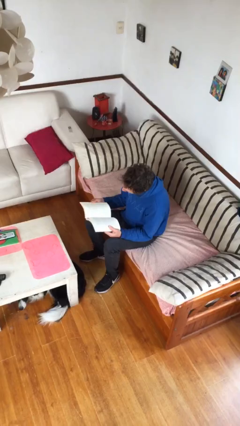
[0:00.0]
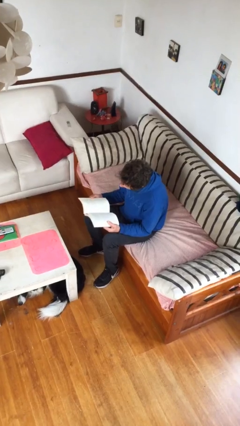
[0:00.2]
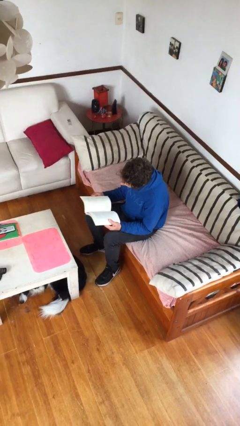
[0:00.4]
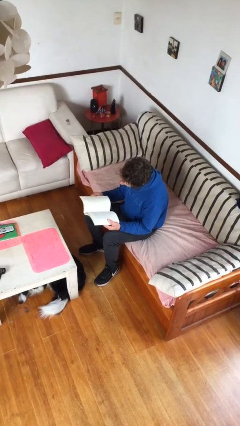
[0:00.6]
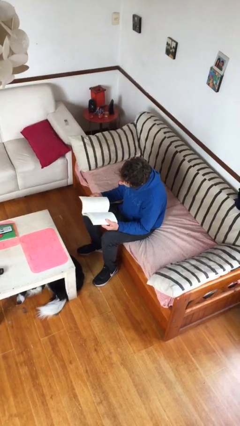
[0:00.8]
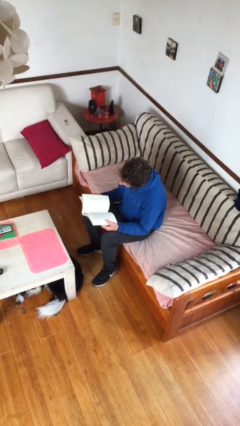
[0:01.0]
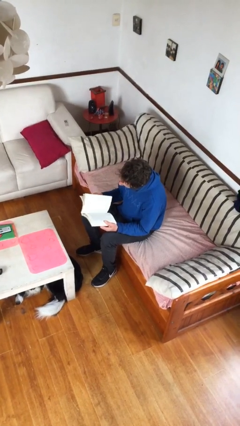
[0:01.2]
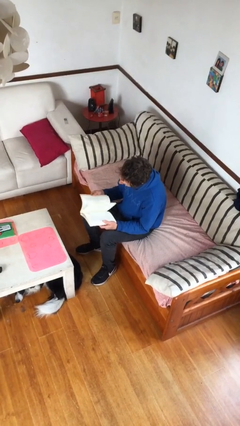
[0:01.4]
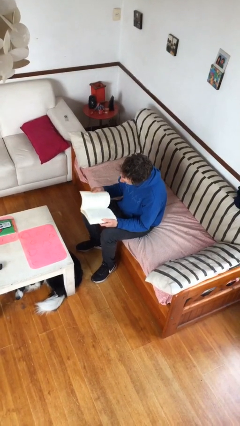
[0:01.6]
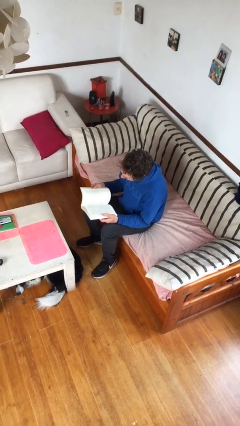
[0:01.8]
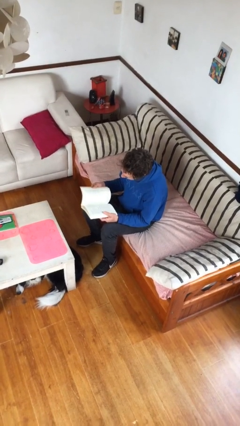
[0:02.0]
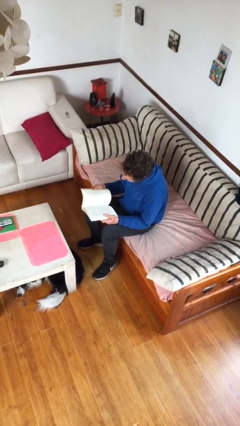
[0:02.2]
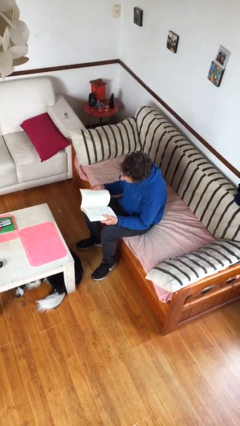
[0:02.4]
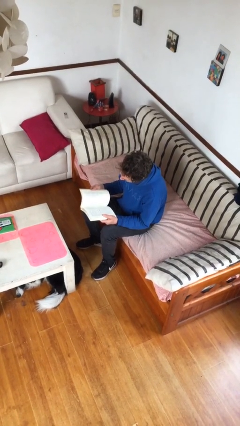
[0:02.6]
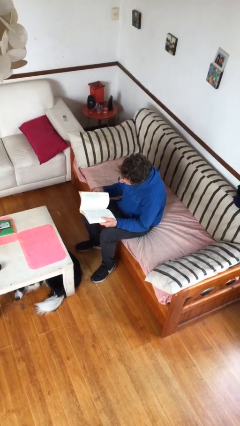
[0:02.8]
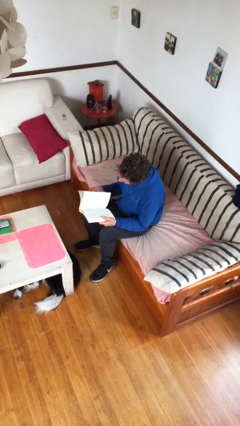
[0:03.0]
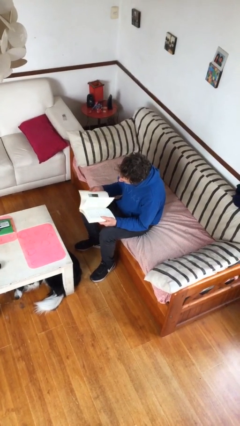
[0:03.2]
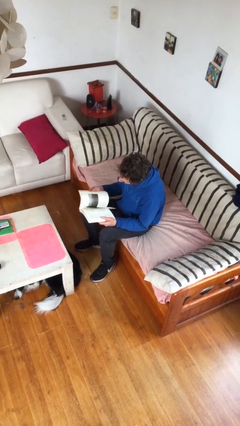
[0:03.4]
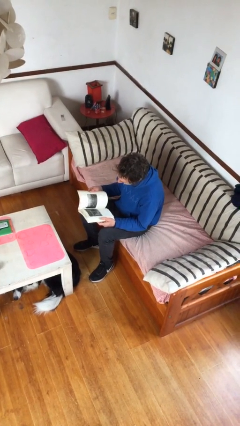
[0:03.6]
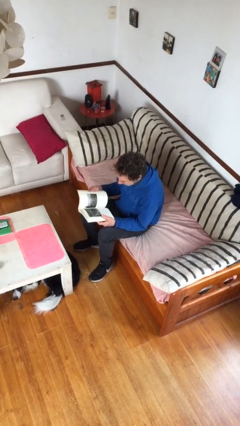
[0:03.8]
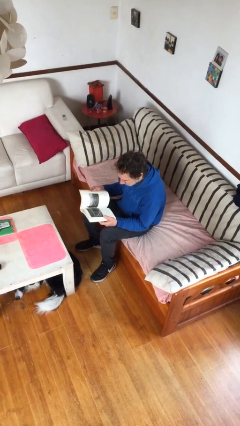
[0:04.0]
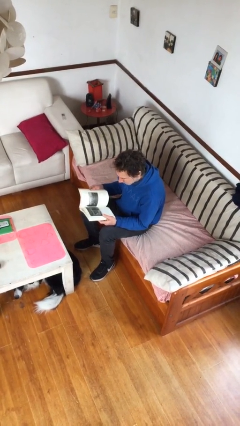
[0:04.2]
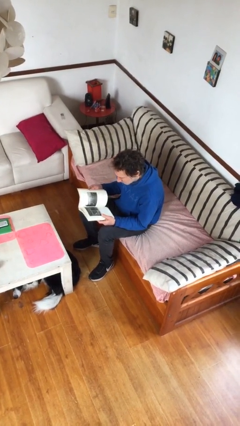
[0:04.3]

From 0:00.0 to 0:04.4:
person reads document

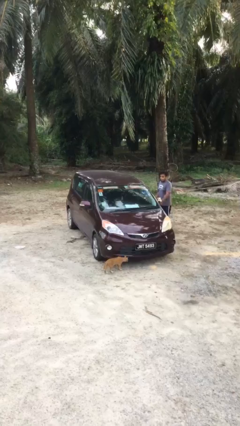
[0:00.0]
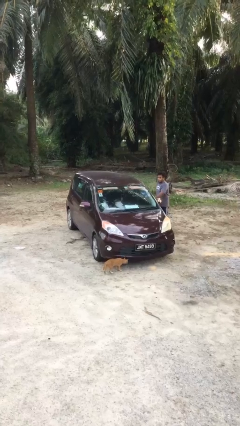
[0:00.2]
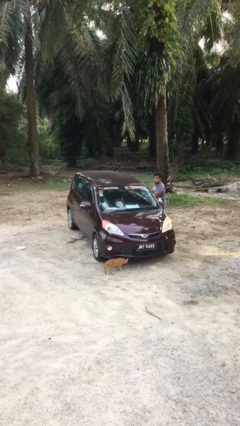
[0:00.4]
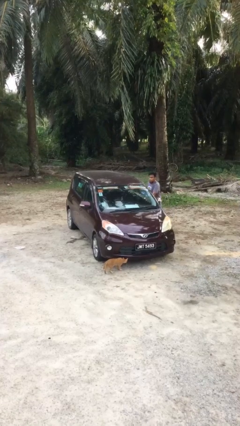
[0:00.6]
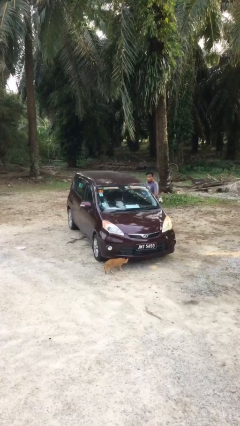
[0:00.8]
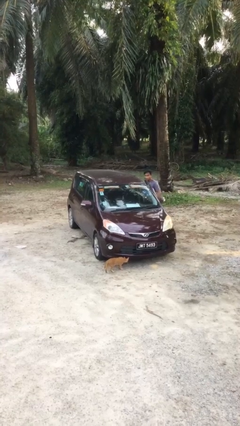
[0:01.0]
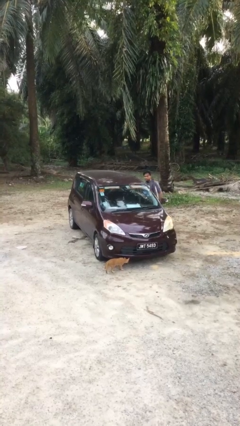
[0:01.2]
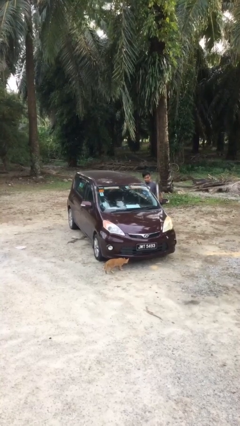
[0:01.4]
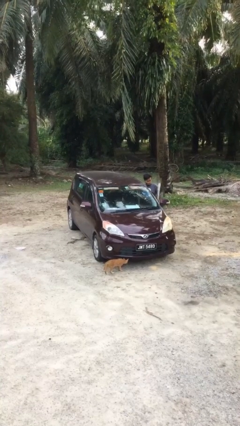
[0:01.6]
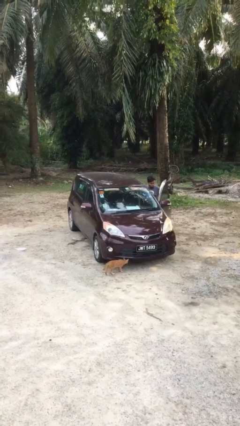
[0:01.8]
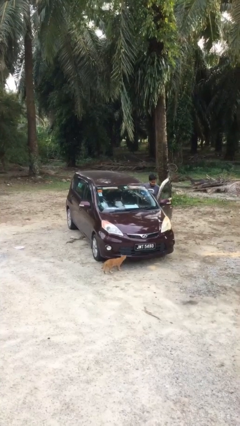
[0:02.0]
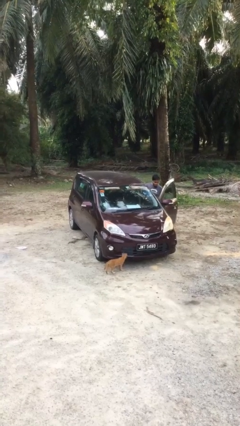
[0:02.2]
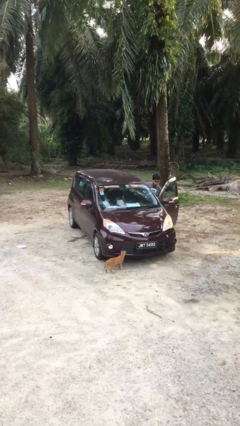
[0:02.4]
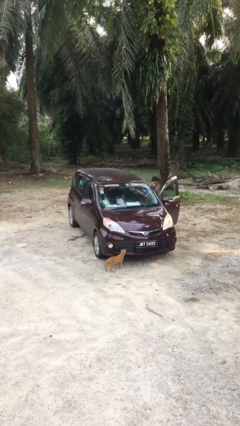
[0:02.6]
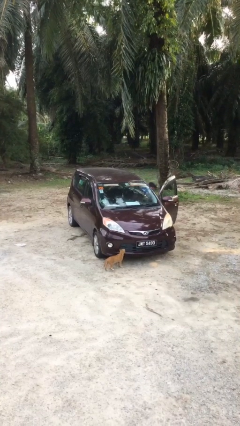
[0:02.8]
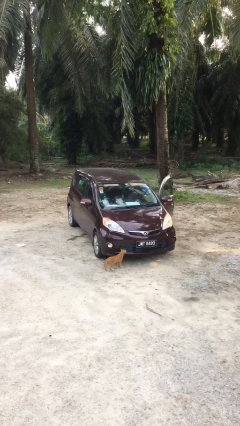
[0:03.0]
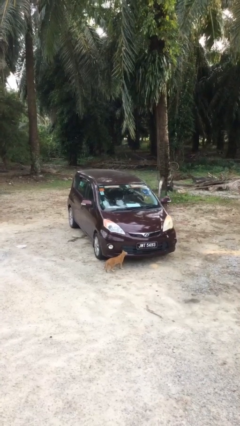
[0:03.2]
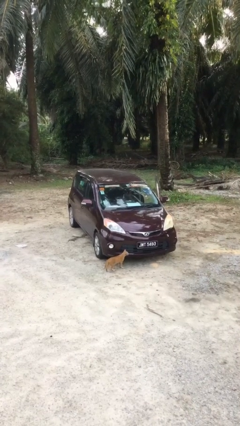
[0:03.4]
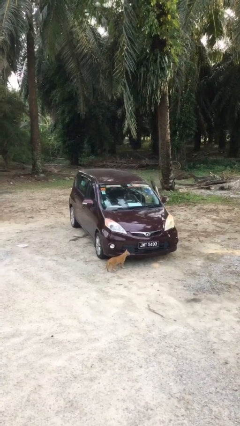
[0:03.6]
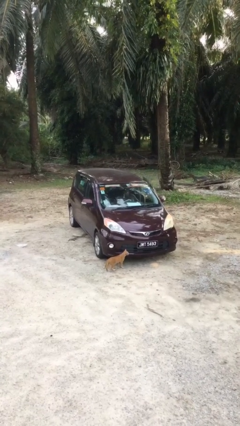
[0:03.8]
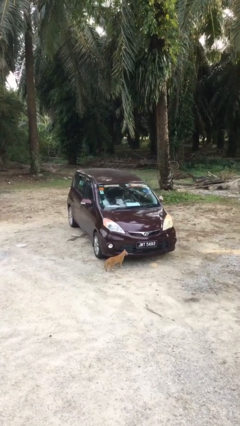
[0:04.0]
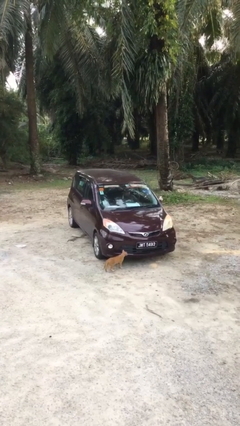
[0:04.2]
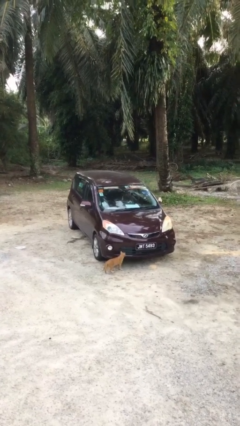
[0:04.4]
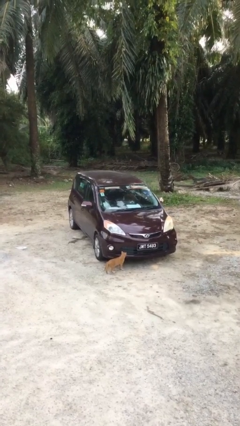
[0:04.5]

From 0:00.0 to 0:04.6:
car picks up person

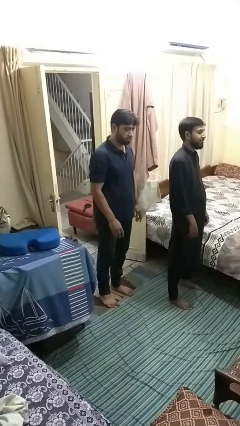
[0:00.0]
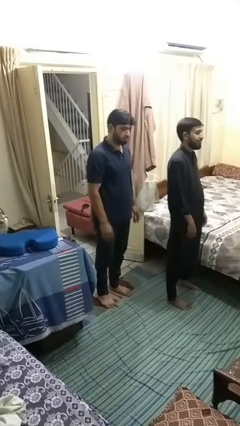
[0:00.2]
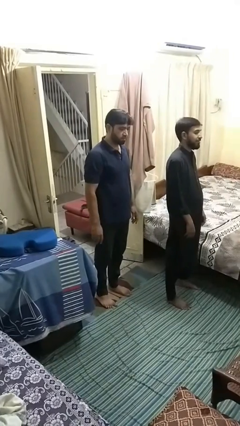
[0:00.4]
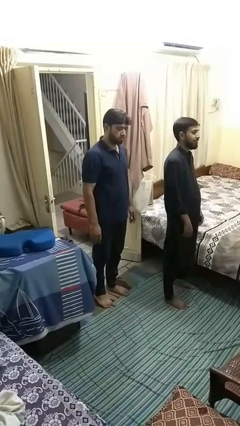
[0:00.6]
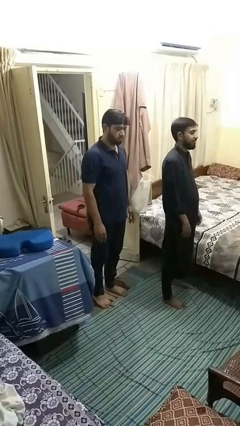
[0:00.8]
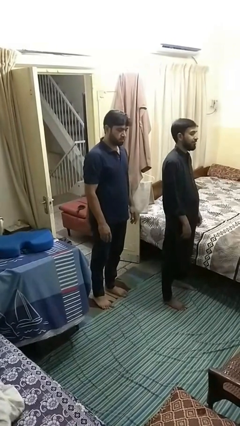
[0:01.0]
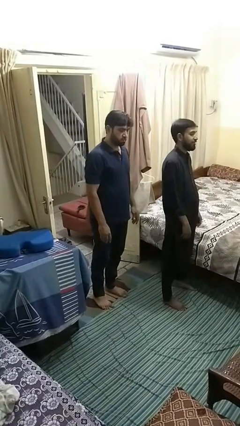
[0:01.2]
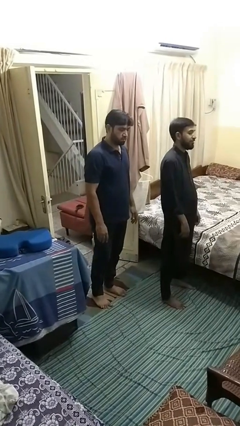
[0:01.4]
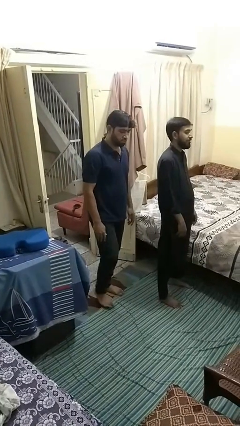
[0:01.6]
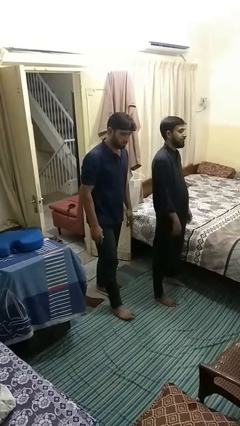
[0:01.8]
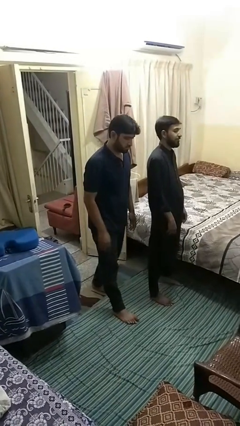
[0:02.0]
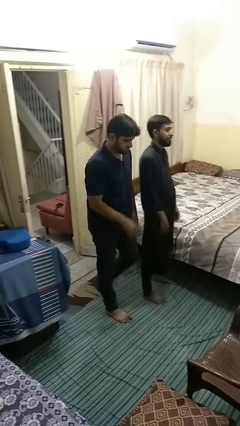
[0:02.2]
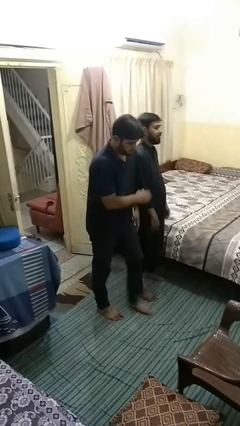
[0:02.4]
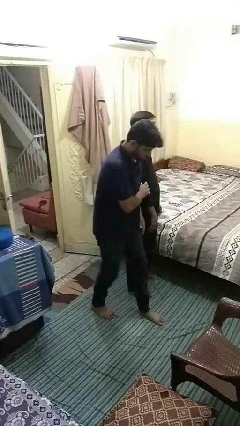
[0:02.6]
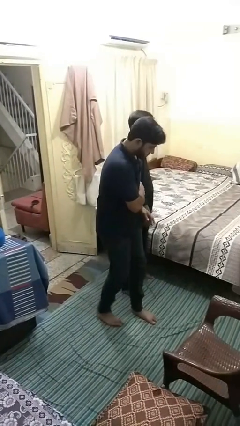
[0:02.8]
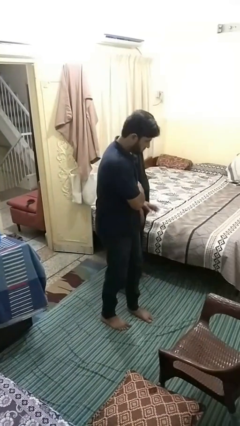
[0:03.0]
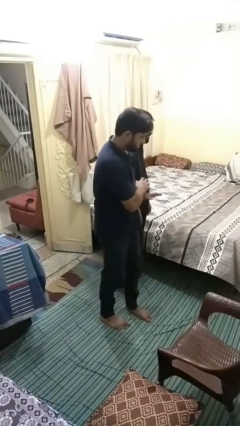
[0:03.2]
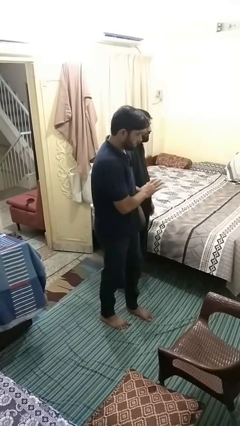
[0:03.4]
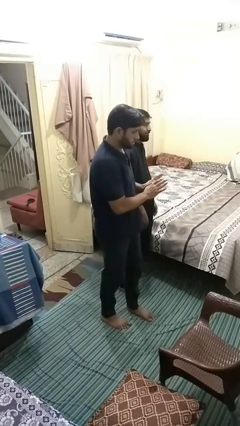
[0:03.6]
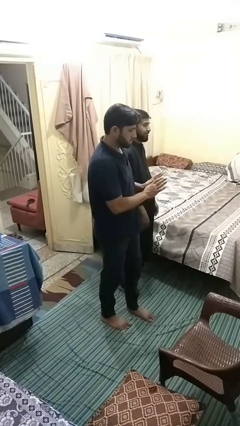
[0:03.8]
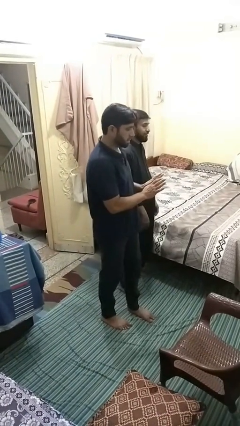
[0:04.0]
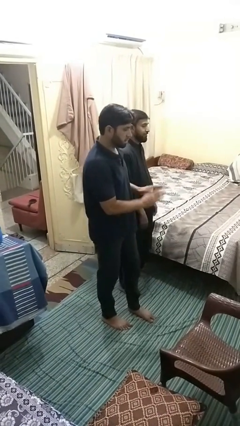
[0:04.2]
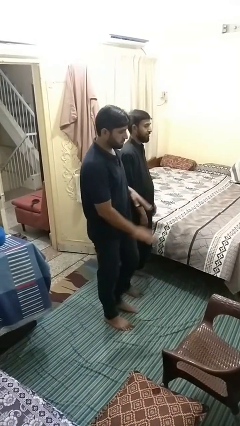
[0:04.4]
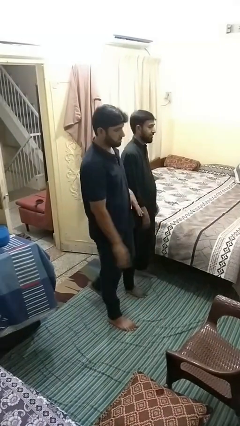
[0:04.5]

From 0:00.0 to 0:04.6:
person bumps into person

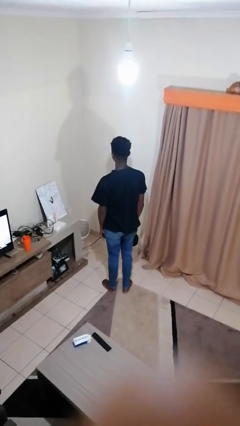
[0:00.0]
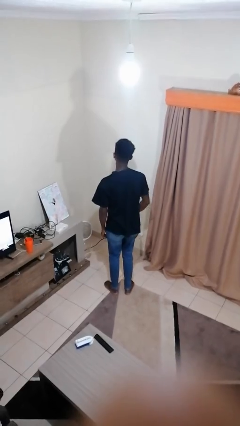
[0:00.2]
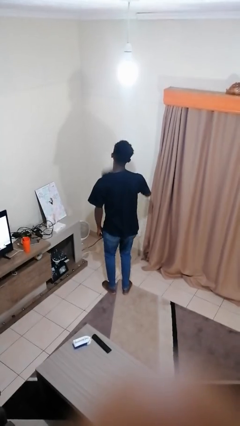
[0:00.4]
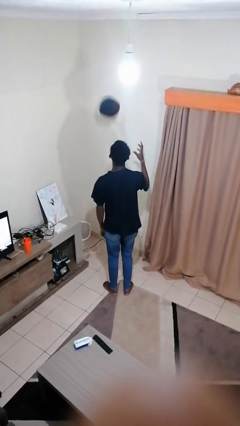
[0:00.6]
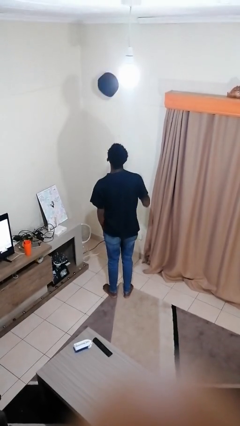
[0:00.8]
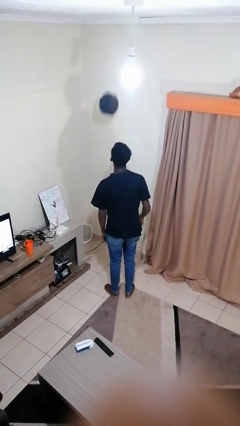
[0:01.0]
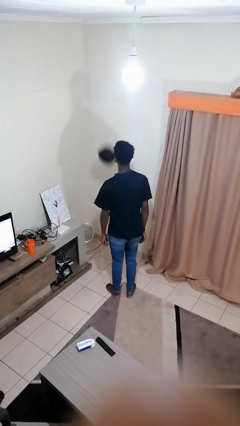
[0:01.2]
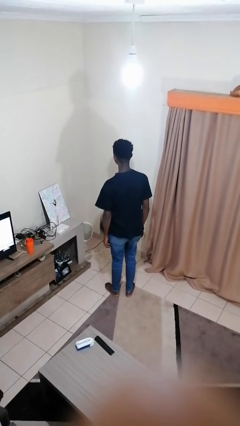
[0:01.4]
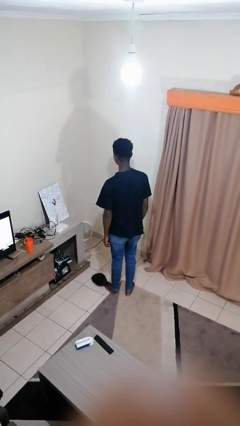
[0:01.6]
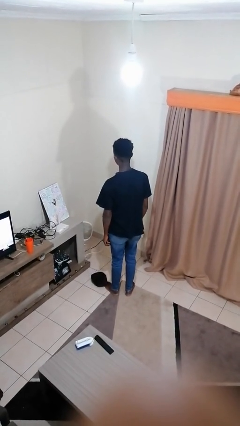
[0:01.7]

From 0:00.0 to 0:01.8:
person throws object into air

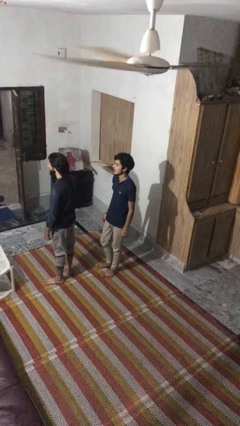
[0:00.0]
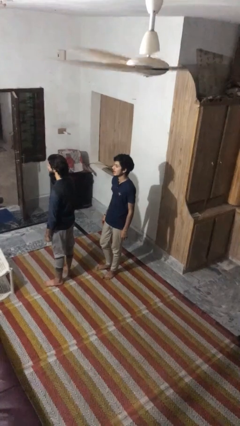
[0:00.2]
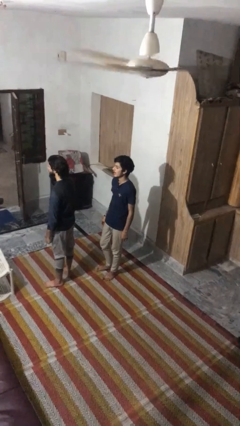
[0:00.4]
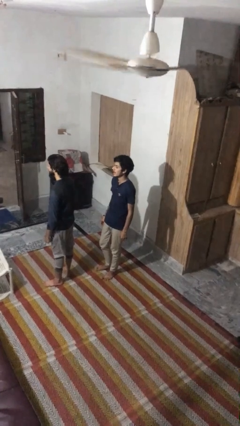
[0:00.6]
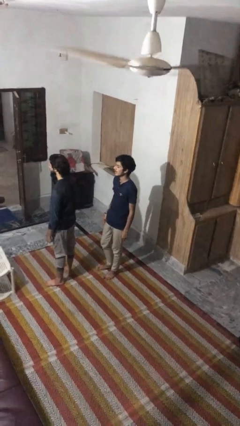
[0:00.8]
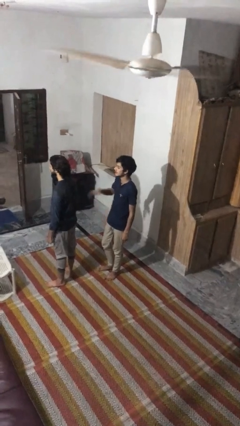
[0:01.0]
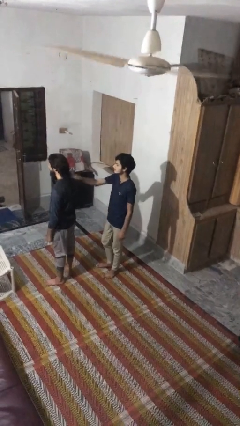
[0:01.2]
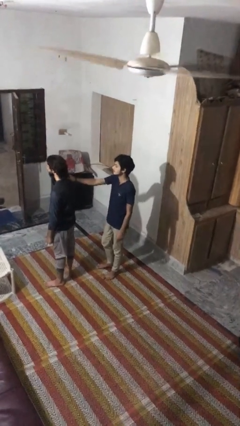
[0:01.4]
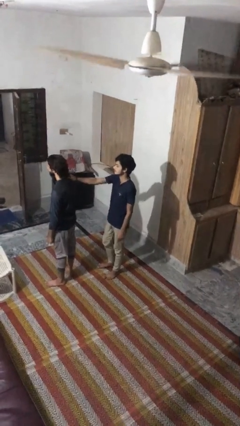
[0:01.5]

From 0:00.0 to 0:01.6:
person grabs person by shoulder

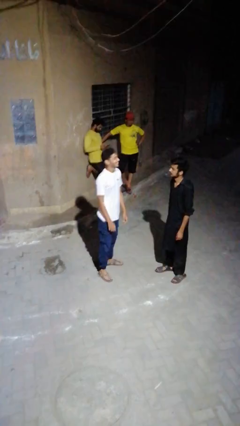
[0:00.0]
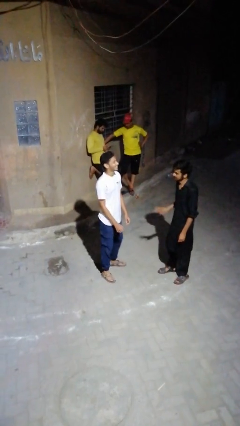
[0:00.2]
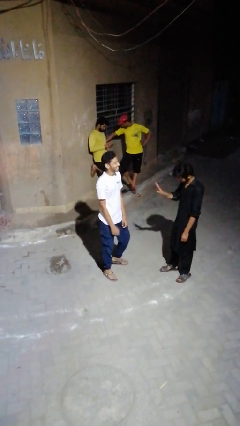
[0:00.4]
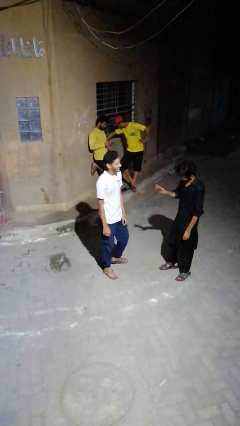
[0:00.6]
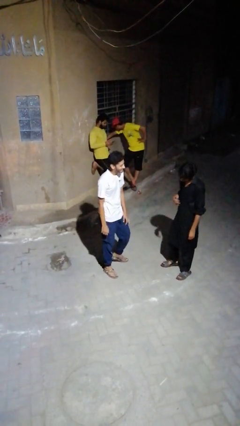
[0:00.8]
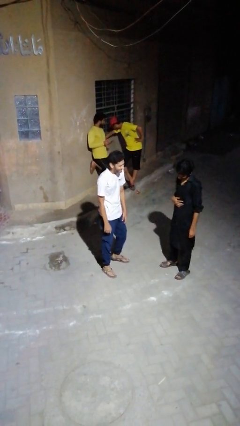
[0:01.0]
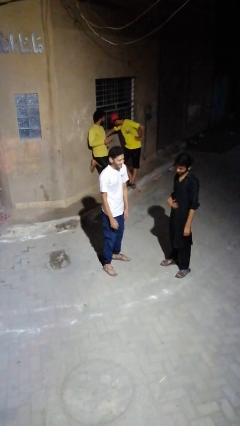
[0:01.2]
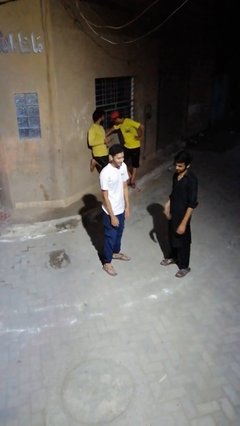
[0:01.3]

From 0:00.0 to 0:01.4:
person laughs with person
